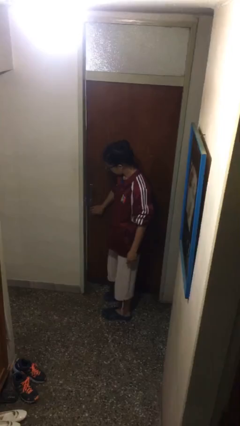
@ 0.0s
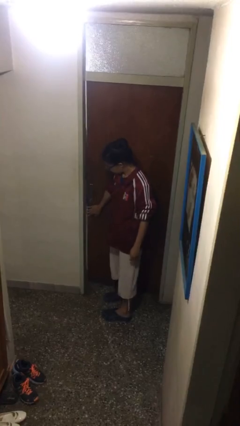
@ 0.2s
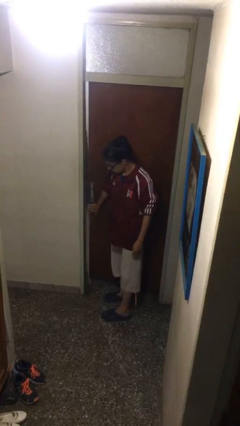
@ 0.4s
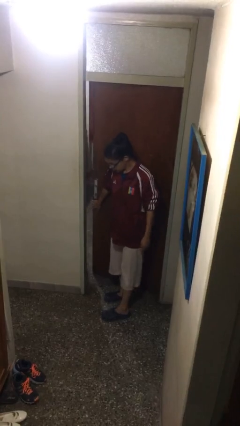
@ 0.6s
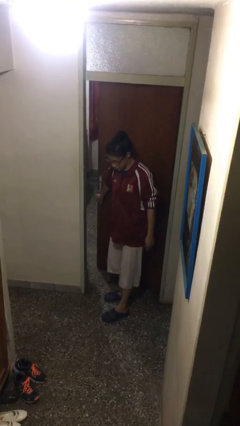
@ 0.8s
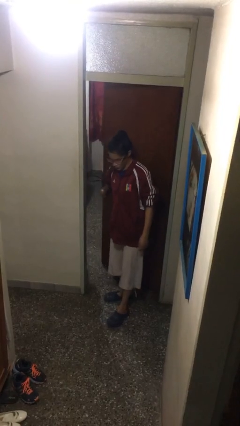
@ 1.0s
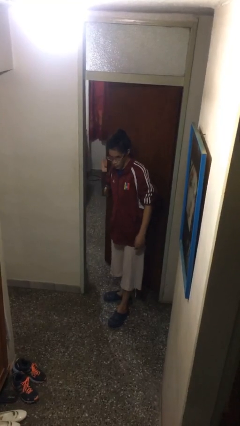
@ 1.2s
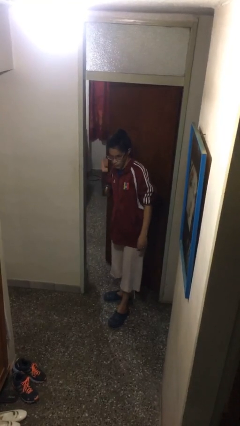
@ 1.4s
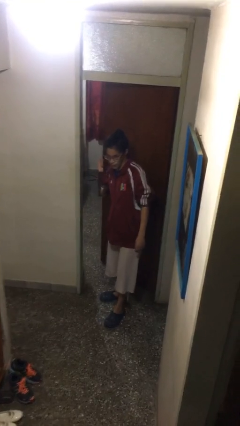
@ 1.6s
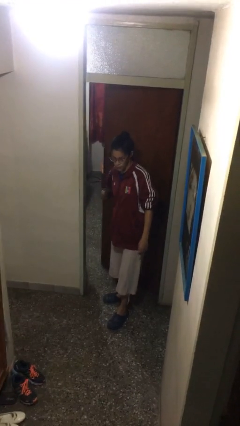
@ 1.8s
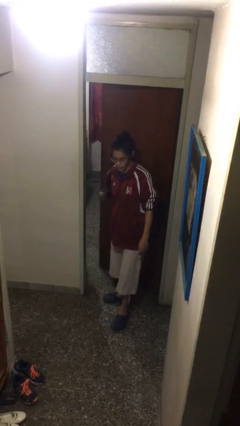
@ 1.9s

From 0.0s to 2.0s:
person opens facility door

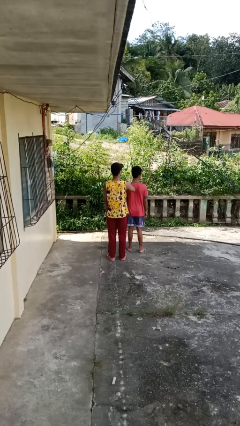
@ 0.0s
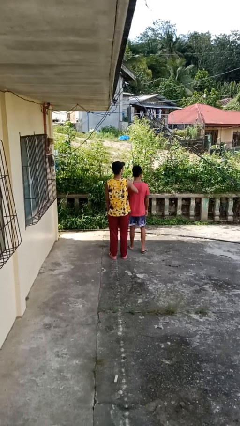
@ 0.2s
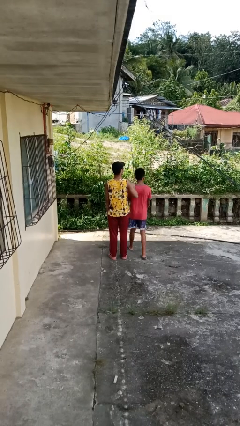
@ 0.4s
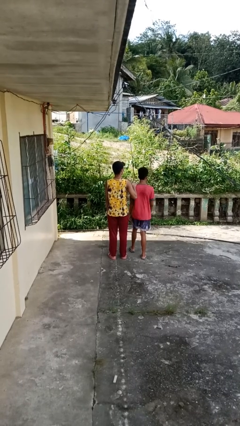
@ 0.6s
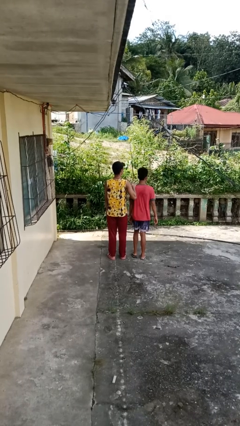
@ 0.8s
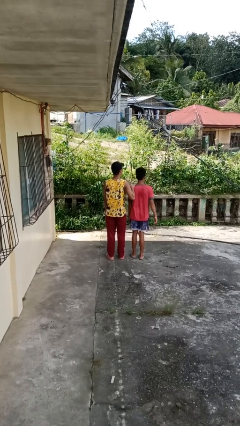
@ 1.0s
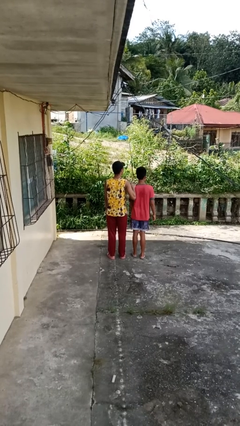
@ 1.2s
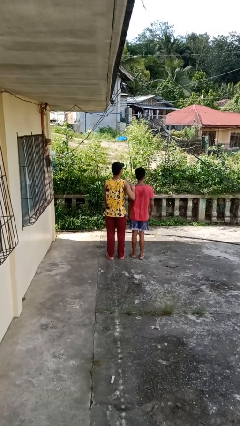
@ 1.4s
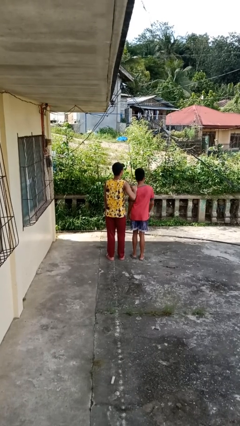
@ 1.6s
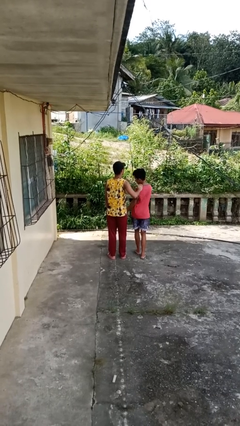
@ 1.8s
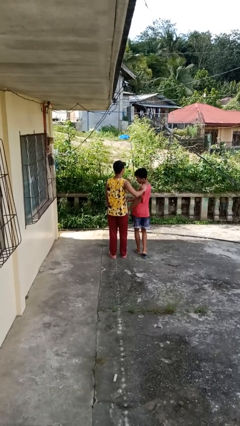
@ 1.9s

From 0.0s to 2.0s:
person grabs person by shoulder

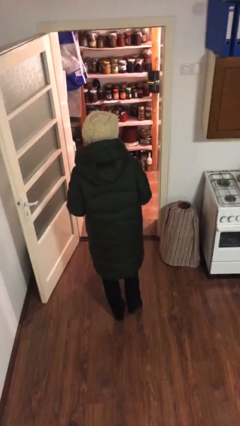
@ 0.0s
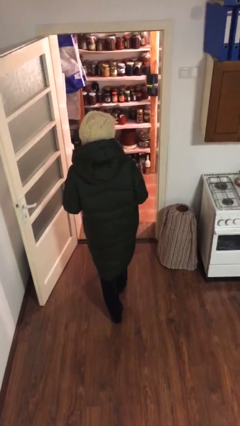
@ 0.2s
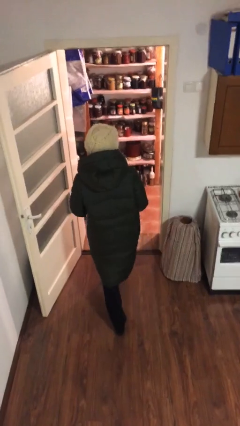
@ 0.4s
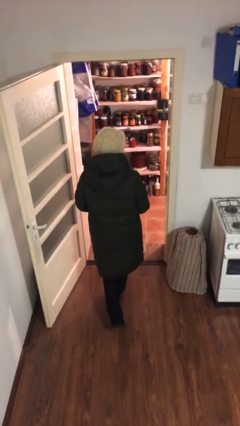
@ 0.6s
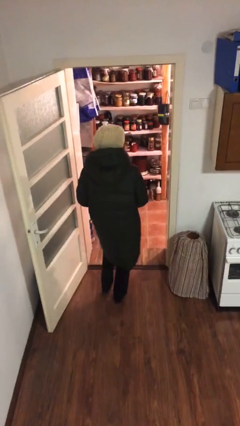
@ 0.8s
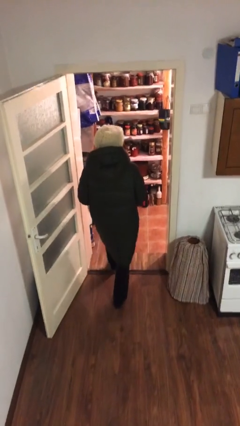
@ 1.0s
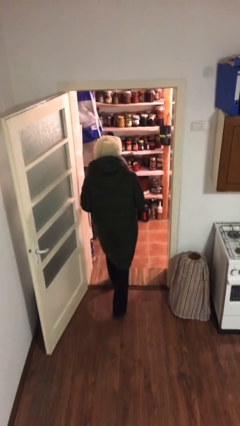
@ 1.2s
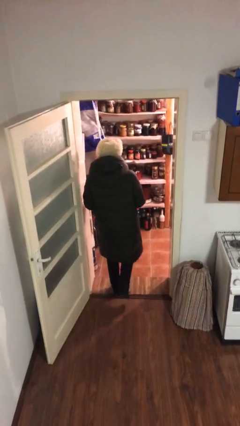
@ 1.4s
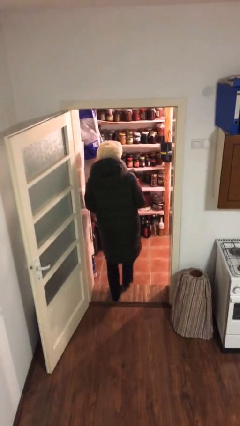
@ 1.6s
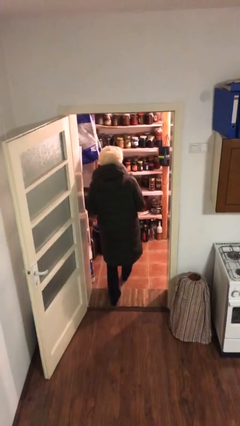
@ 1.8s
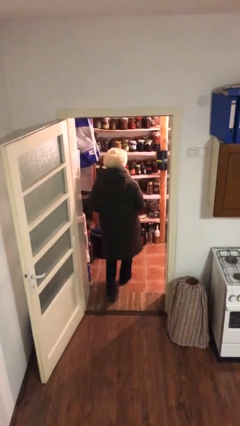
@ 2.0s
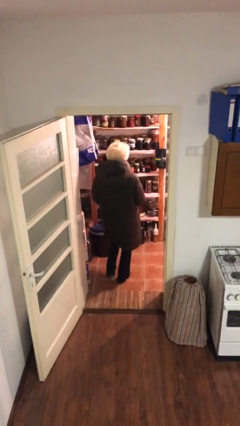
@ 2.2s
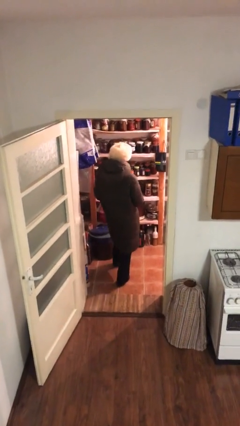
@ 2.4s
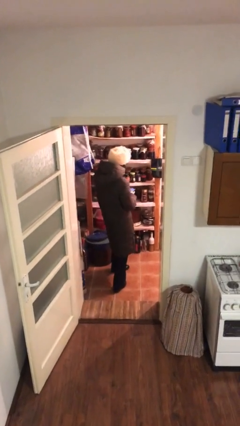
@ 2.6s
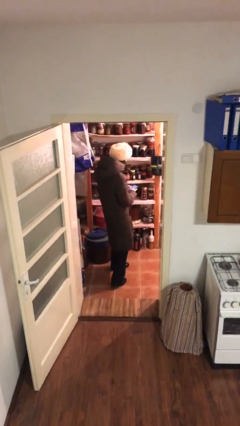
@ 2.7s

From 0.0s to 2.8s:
person exits scene through structure

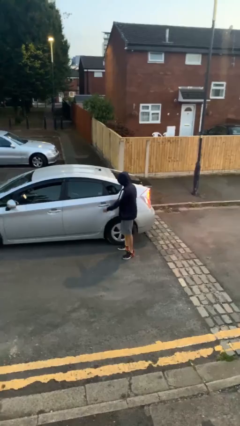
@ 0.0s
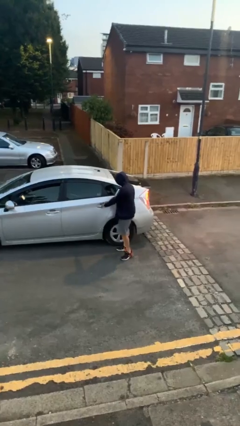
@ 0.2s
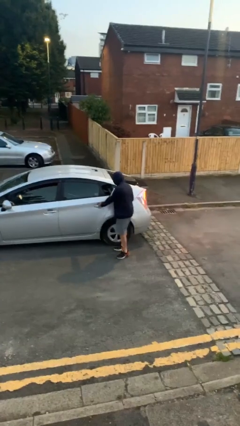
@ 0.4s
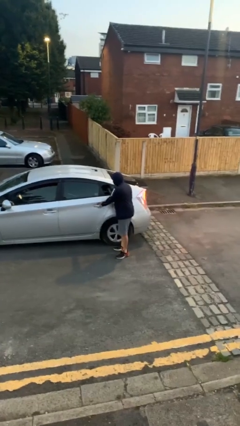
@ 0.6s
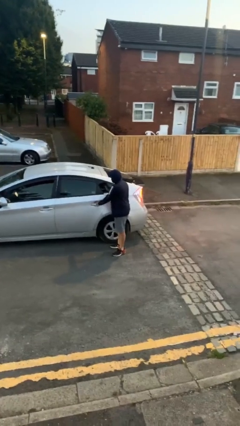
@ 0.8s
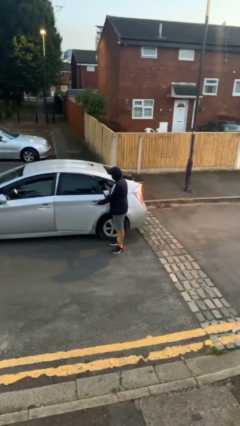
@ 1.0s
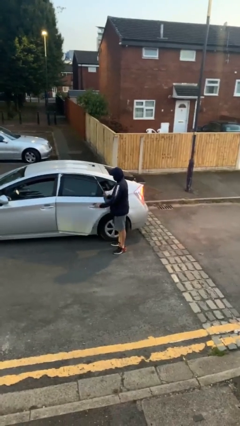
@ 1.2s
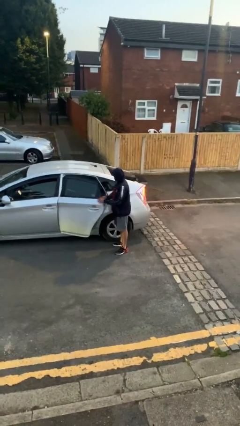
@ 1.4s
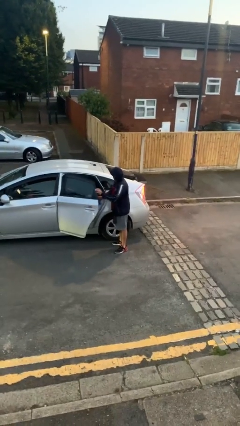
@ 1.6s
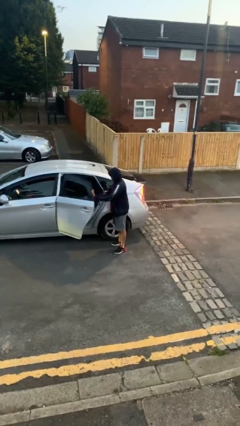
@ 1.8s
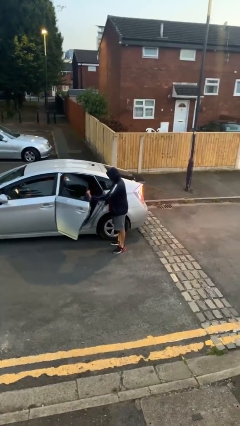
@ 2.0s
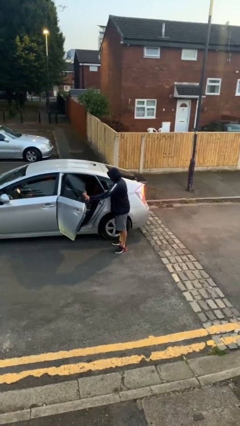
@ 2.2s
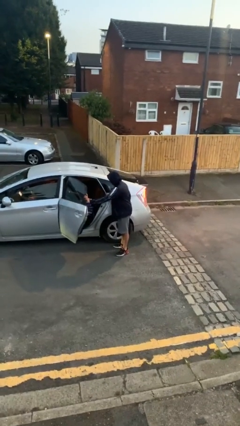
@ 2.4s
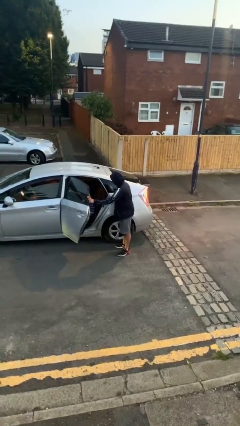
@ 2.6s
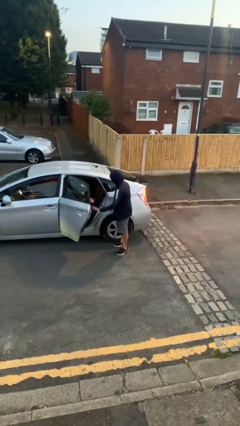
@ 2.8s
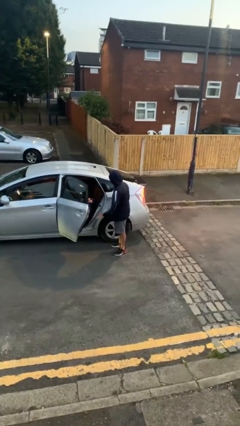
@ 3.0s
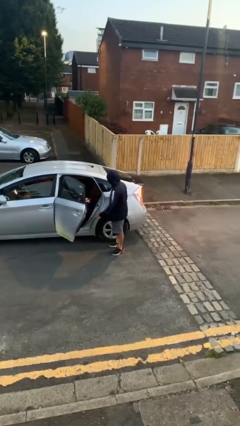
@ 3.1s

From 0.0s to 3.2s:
person opens car door

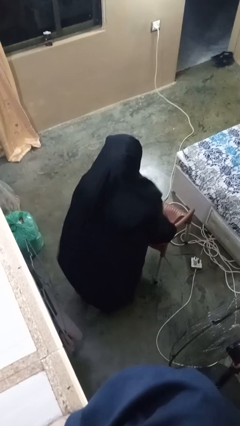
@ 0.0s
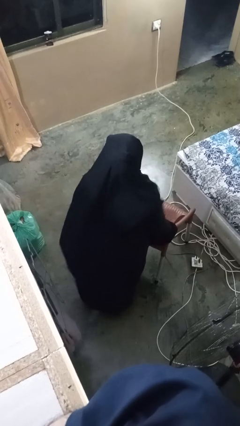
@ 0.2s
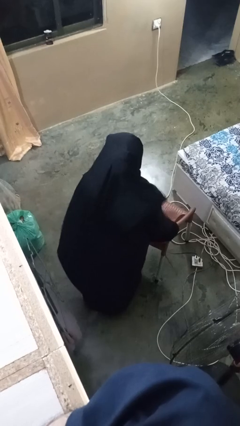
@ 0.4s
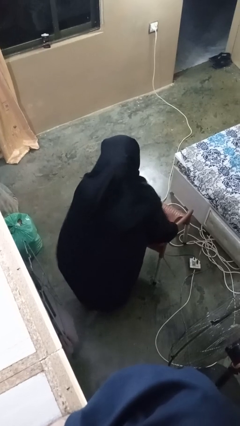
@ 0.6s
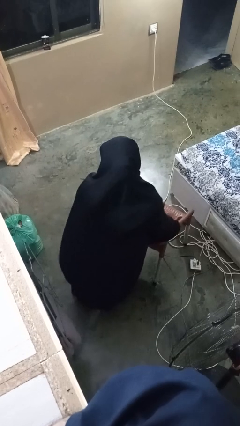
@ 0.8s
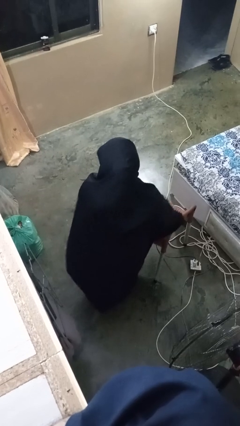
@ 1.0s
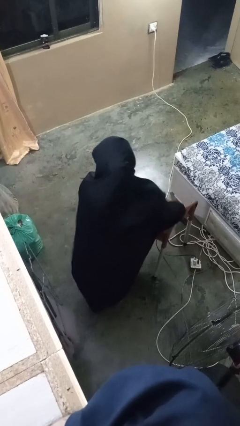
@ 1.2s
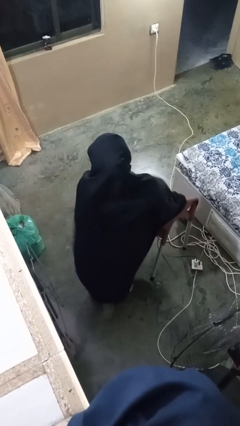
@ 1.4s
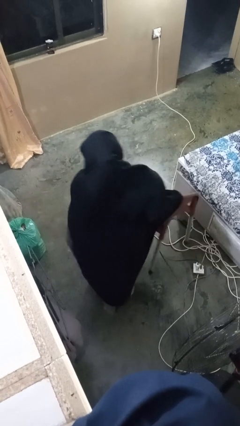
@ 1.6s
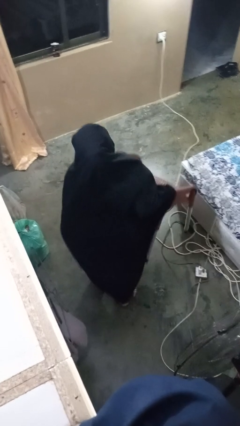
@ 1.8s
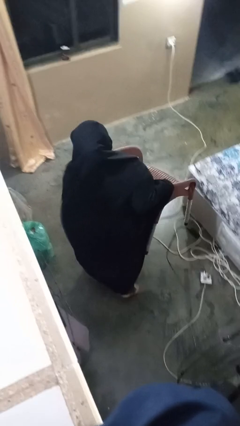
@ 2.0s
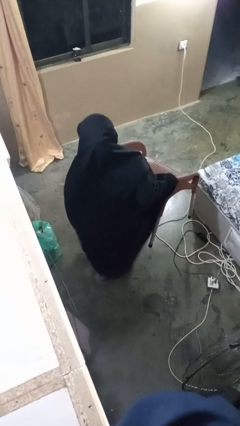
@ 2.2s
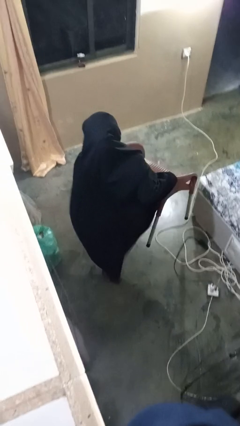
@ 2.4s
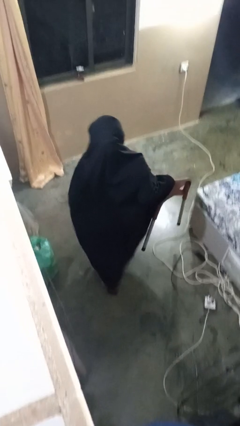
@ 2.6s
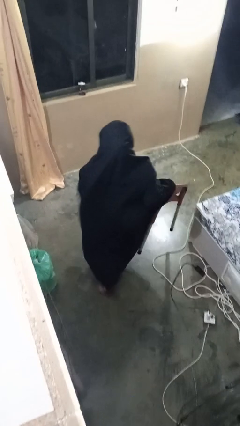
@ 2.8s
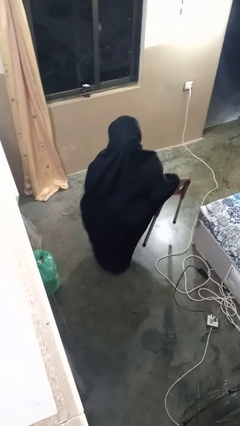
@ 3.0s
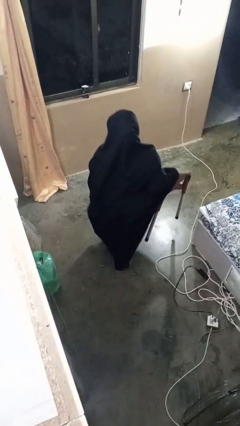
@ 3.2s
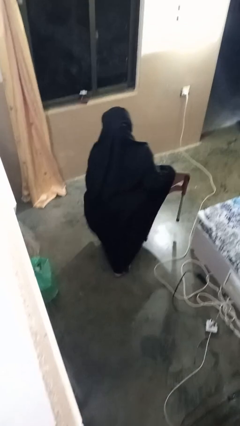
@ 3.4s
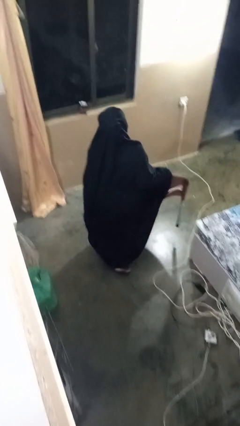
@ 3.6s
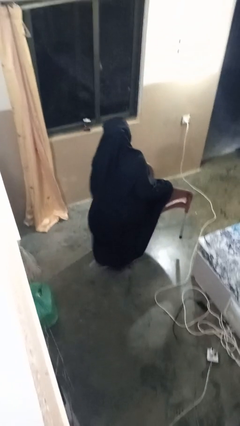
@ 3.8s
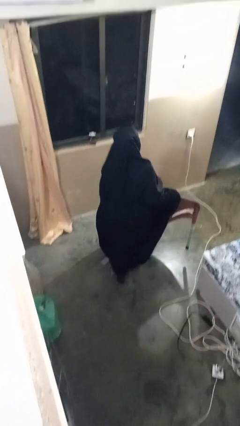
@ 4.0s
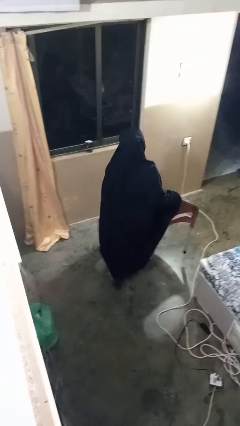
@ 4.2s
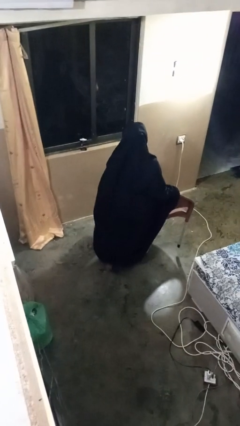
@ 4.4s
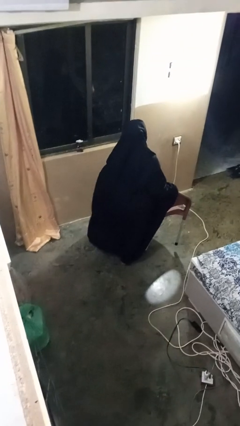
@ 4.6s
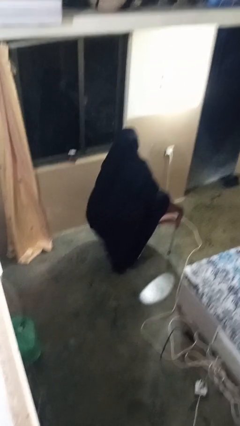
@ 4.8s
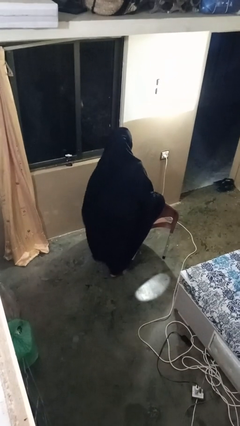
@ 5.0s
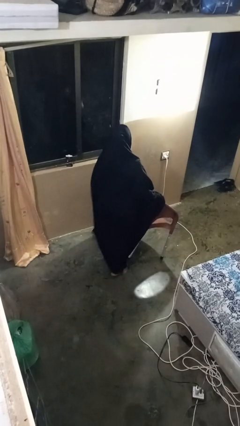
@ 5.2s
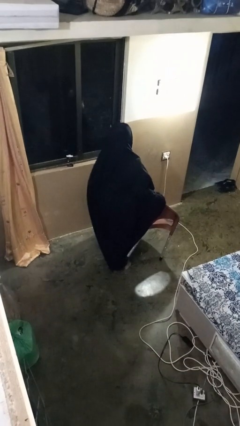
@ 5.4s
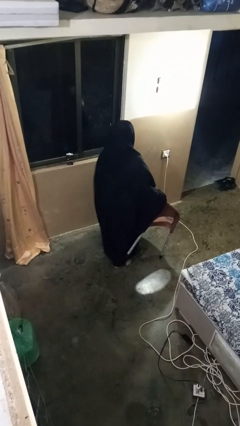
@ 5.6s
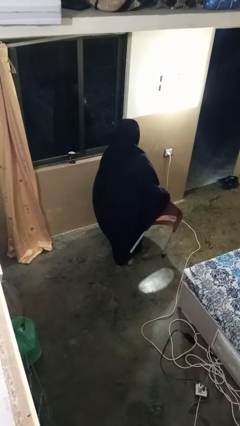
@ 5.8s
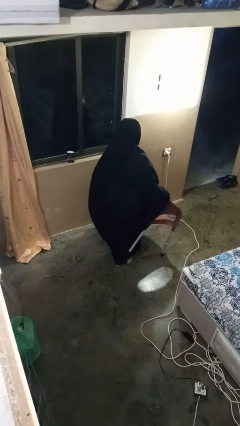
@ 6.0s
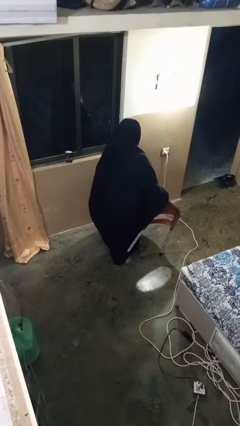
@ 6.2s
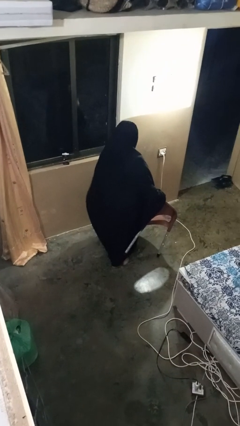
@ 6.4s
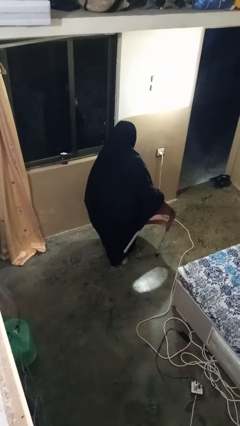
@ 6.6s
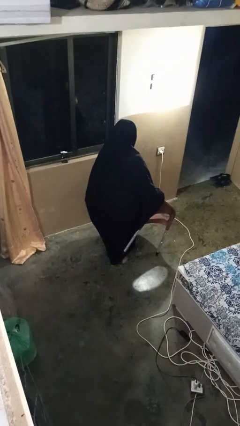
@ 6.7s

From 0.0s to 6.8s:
person carries furniture

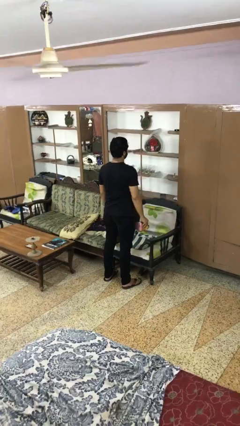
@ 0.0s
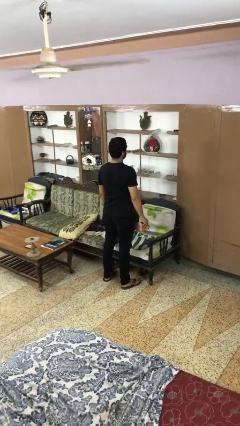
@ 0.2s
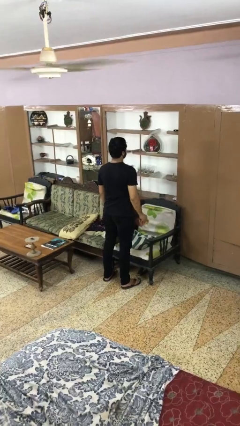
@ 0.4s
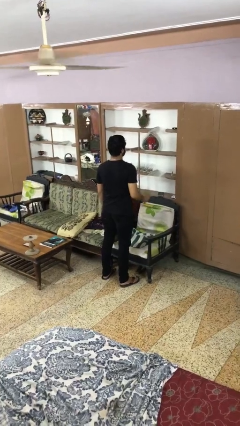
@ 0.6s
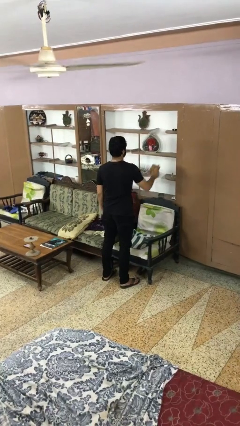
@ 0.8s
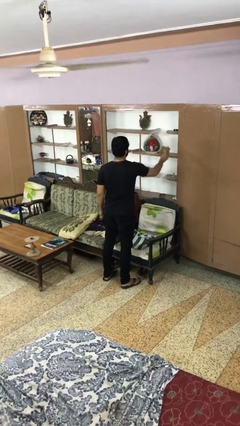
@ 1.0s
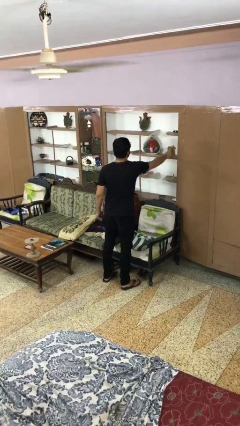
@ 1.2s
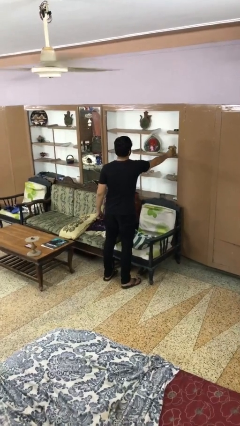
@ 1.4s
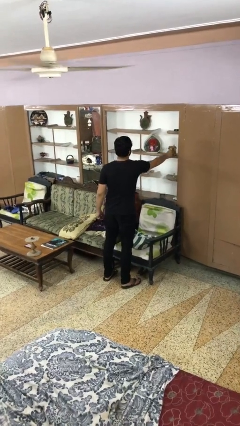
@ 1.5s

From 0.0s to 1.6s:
person puts down object on shelf
